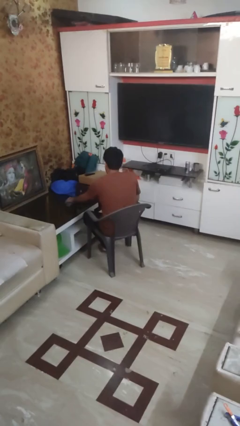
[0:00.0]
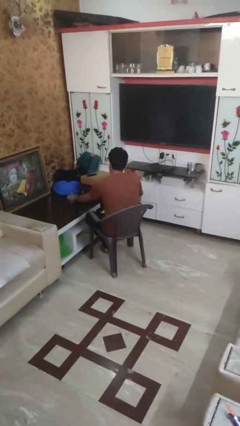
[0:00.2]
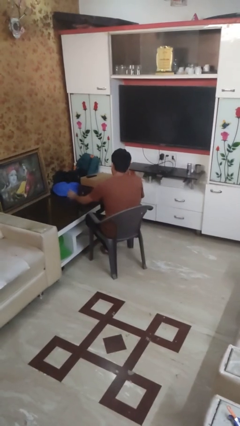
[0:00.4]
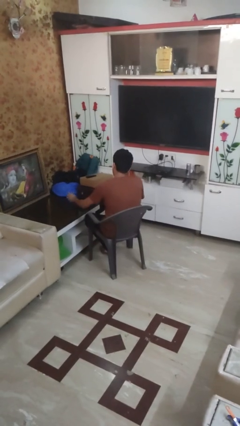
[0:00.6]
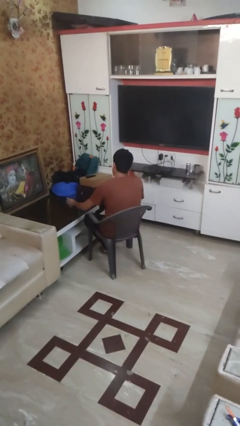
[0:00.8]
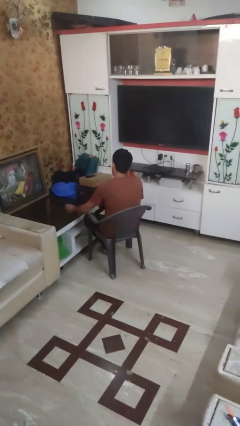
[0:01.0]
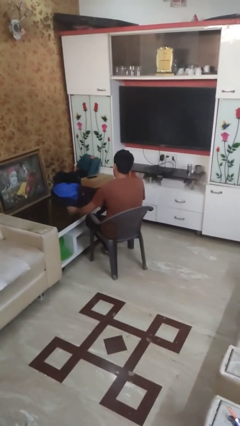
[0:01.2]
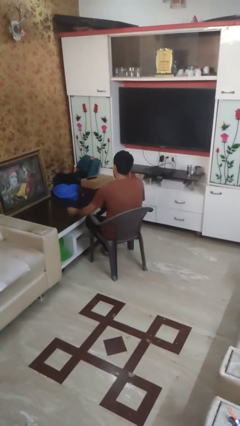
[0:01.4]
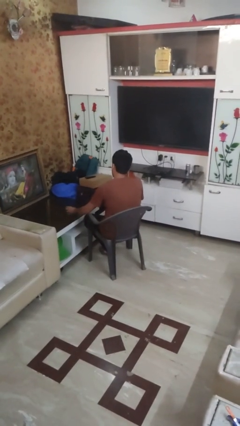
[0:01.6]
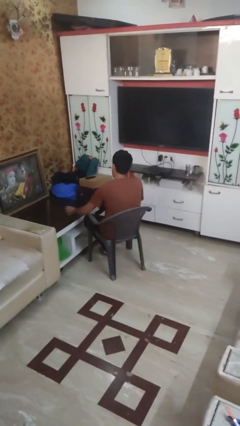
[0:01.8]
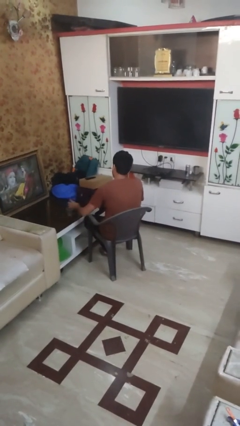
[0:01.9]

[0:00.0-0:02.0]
person sets upright glass

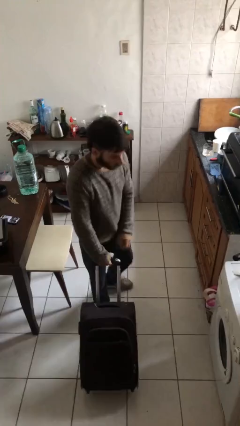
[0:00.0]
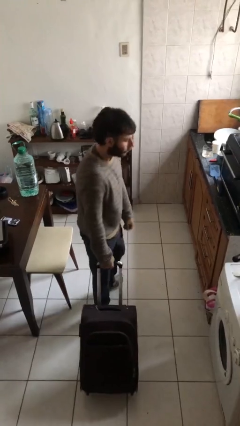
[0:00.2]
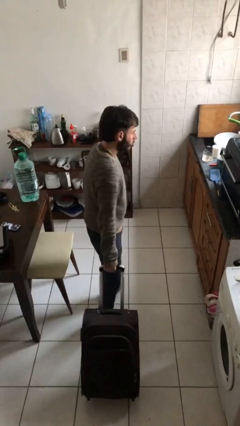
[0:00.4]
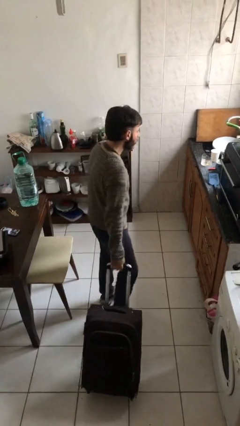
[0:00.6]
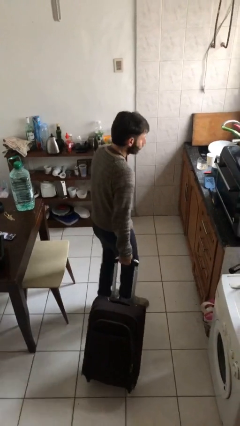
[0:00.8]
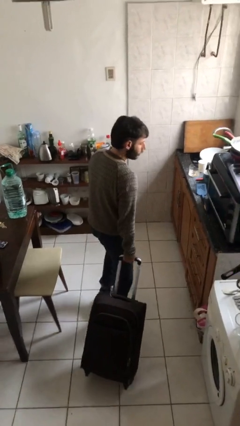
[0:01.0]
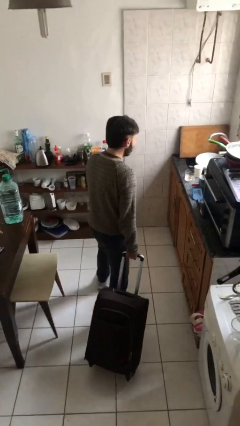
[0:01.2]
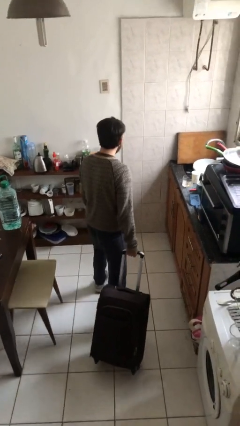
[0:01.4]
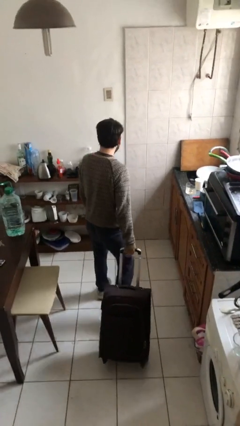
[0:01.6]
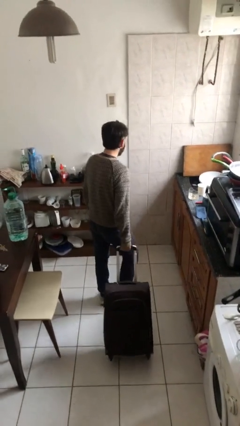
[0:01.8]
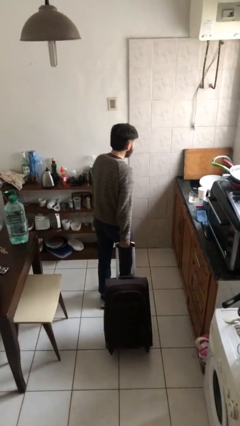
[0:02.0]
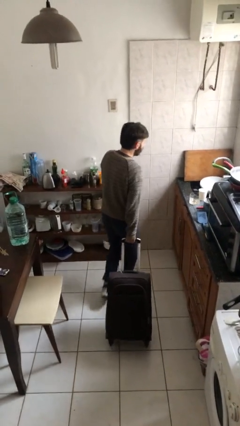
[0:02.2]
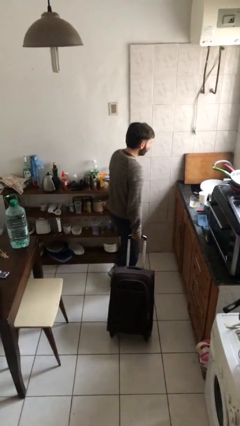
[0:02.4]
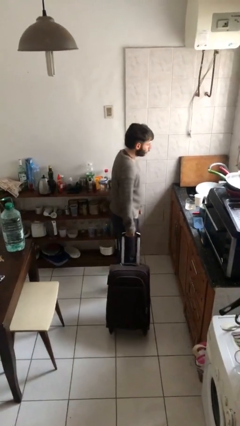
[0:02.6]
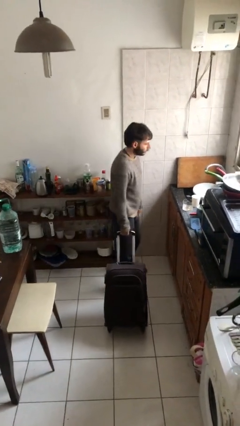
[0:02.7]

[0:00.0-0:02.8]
person pulls wheeled cart

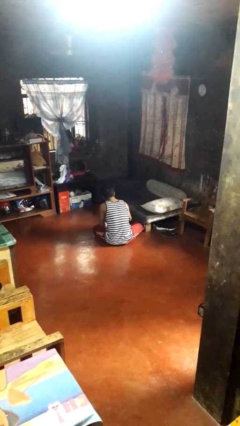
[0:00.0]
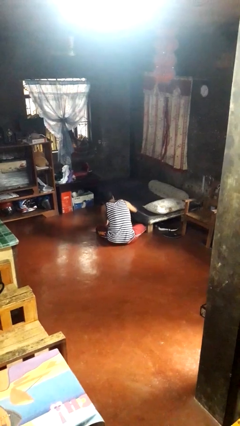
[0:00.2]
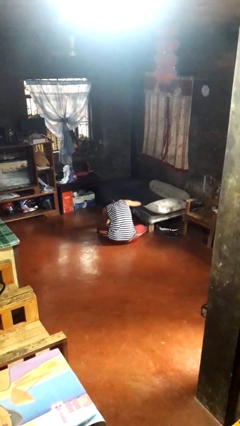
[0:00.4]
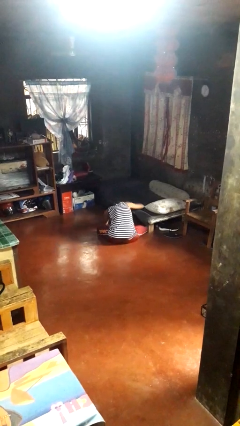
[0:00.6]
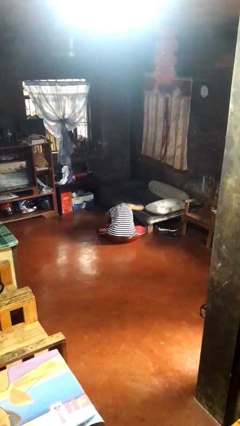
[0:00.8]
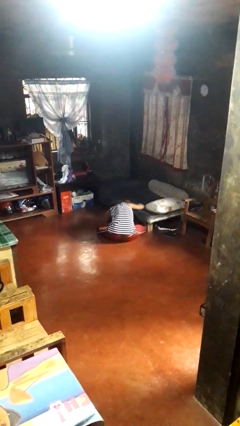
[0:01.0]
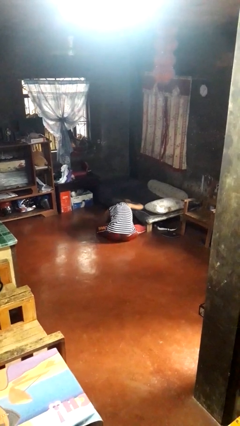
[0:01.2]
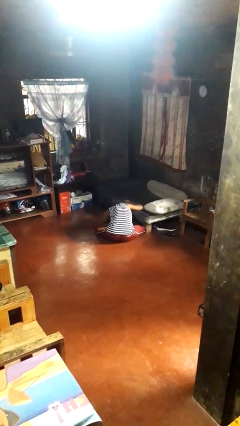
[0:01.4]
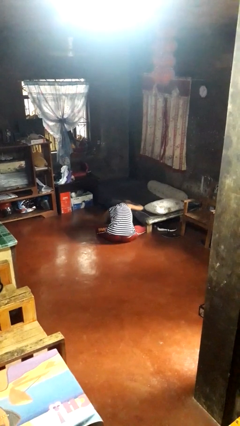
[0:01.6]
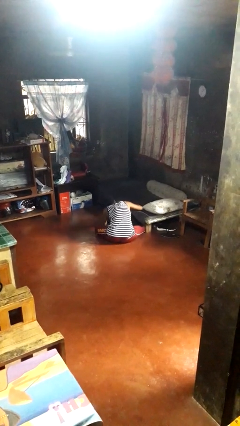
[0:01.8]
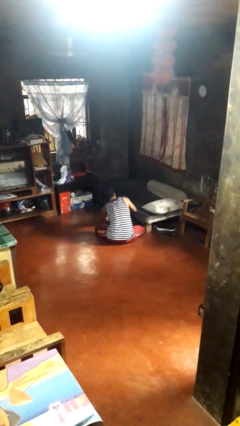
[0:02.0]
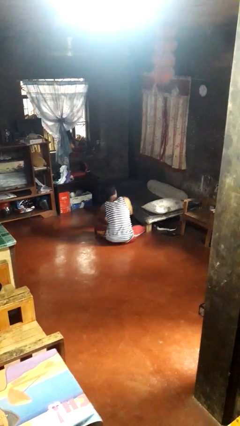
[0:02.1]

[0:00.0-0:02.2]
person searches under bed

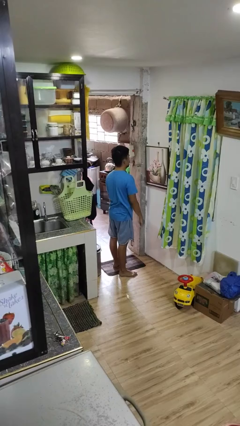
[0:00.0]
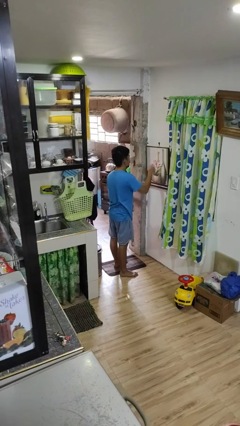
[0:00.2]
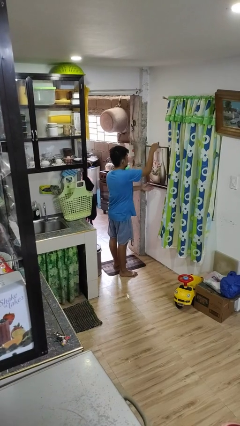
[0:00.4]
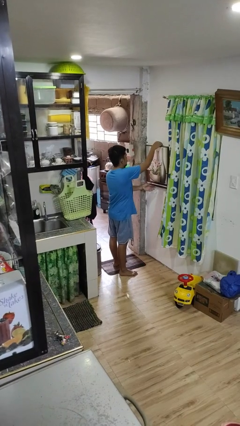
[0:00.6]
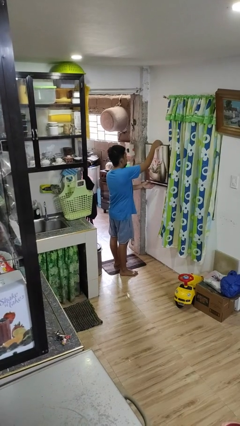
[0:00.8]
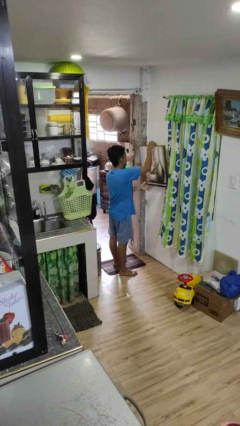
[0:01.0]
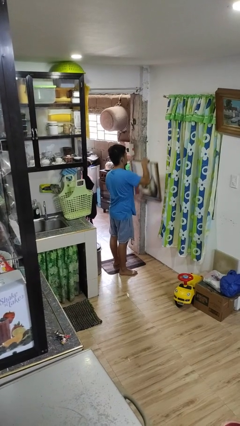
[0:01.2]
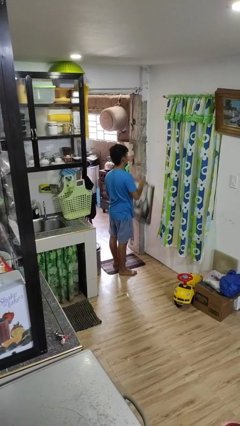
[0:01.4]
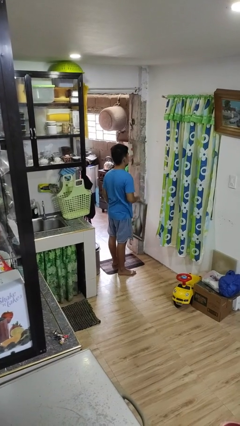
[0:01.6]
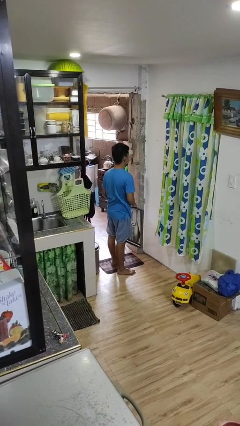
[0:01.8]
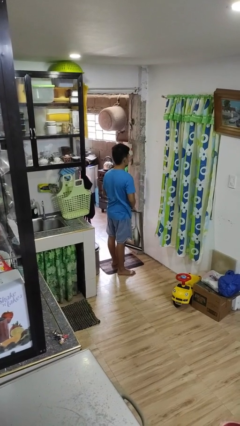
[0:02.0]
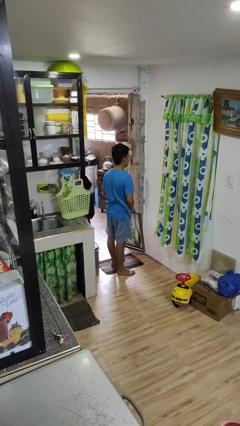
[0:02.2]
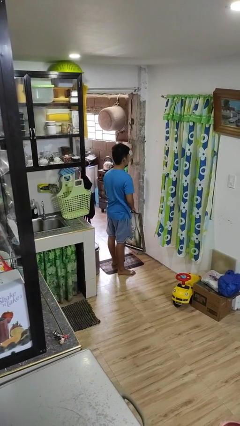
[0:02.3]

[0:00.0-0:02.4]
person takes down picture frame

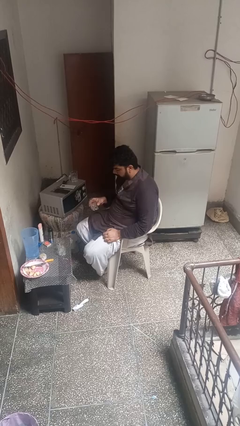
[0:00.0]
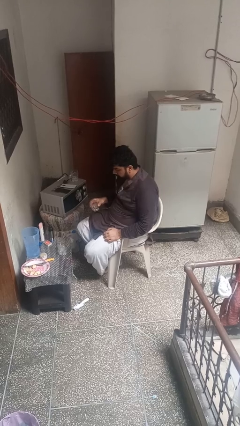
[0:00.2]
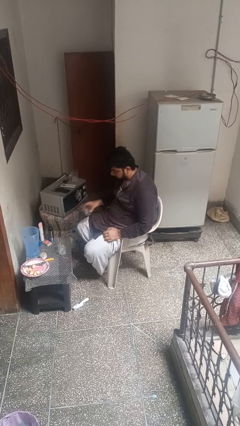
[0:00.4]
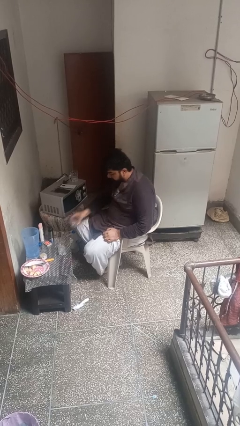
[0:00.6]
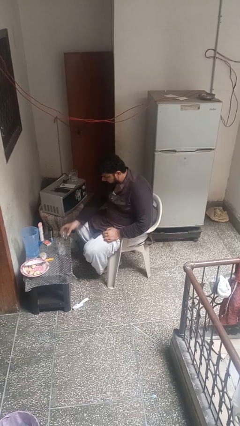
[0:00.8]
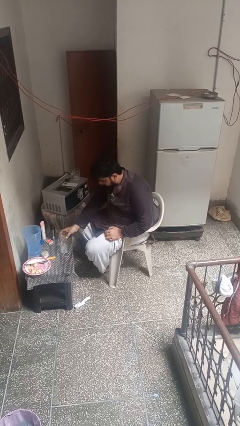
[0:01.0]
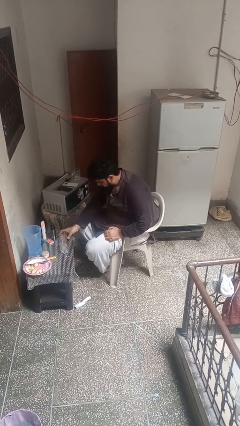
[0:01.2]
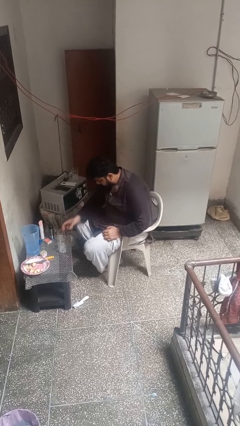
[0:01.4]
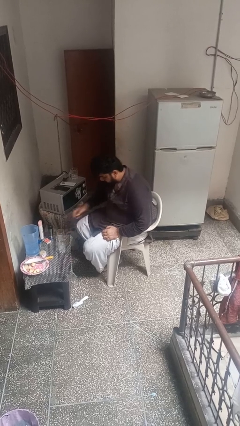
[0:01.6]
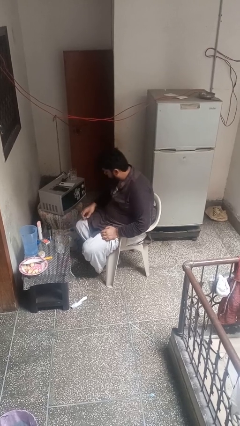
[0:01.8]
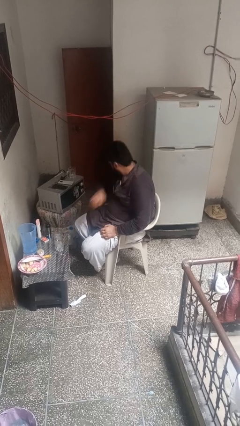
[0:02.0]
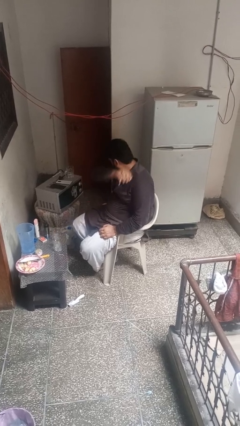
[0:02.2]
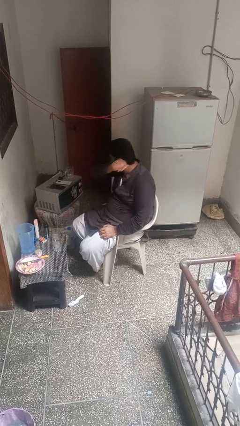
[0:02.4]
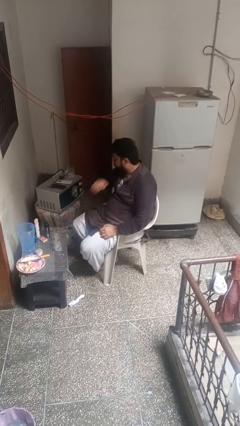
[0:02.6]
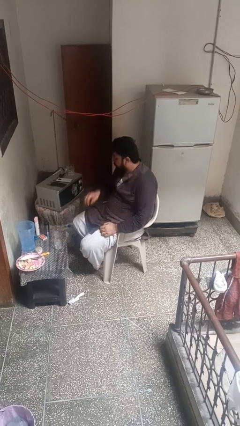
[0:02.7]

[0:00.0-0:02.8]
person puts down object on table

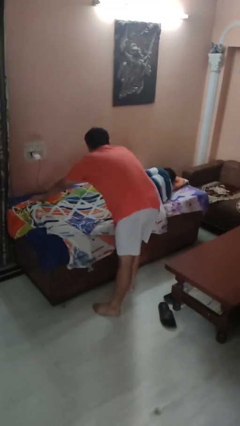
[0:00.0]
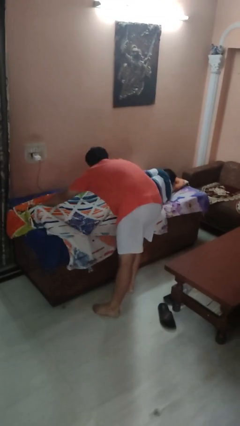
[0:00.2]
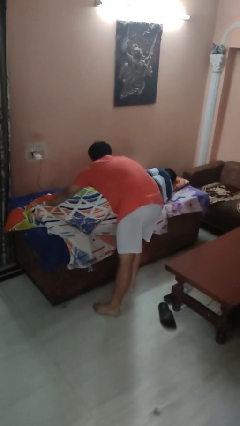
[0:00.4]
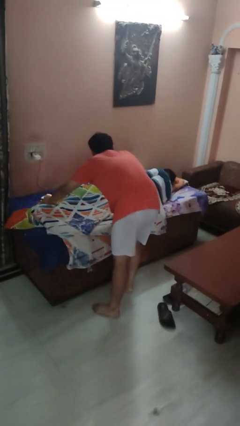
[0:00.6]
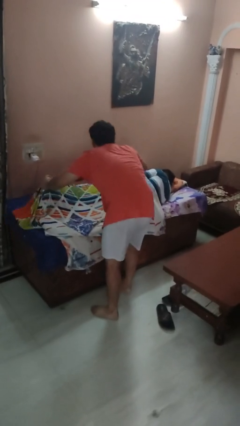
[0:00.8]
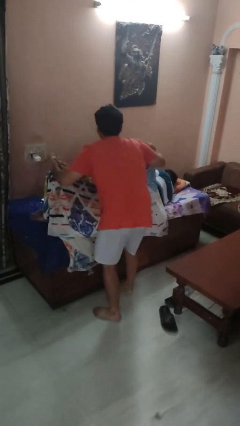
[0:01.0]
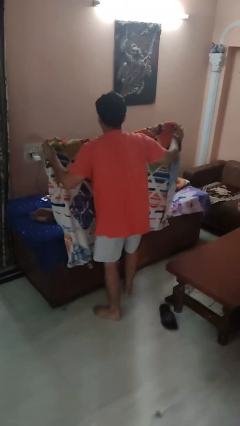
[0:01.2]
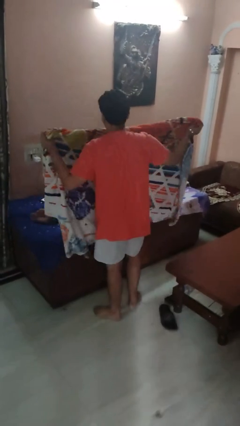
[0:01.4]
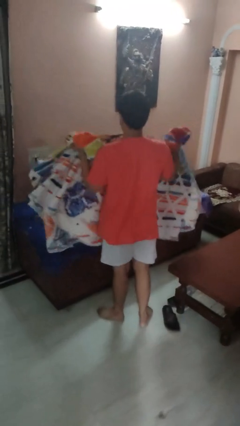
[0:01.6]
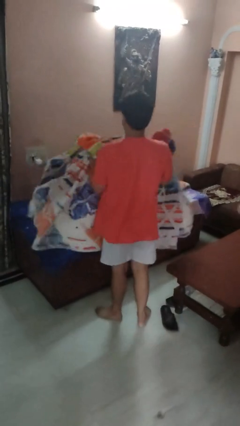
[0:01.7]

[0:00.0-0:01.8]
person uncovers friend with blanket

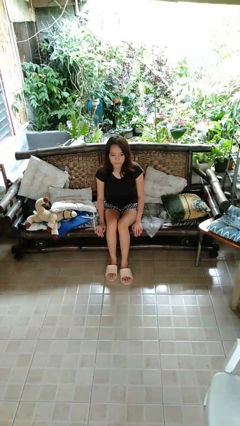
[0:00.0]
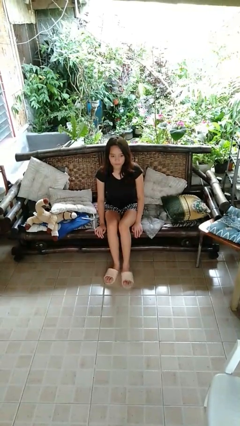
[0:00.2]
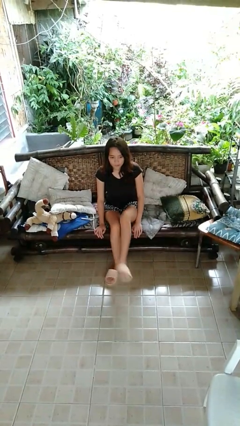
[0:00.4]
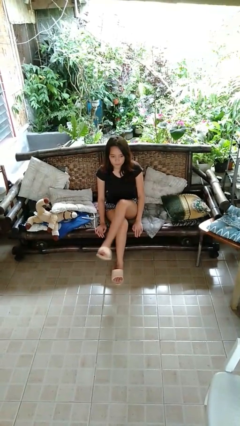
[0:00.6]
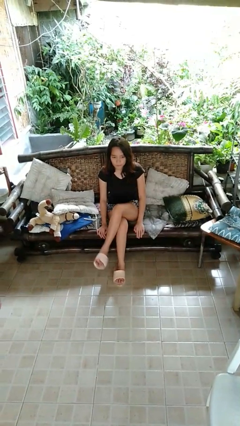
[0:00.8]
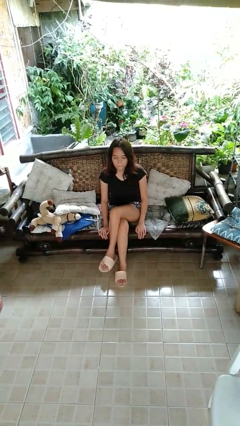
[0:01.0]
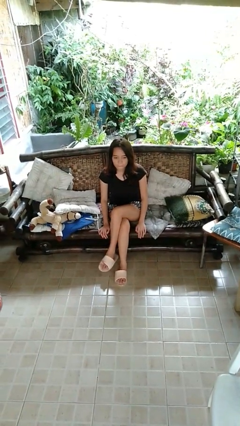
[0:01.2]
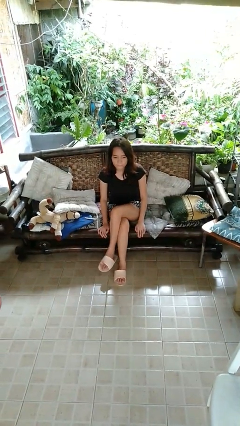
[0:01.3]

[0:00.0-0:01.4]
person crosses legs

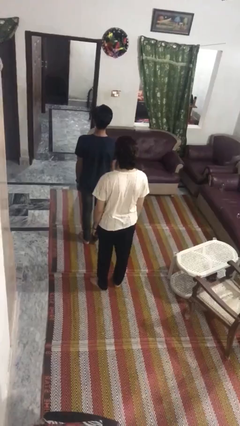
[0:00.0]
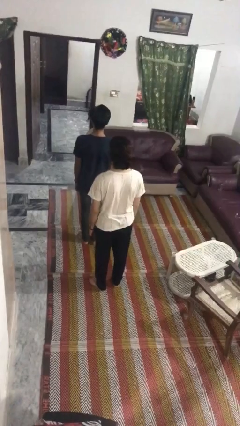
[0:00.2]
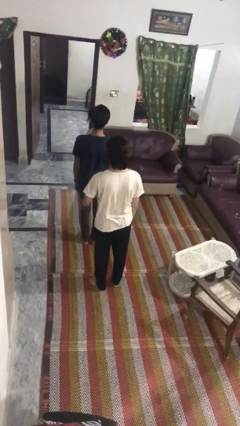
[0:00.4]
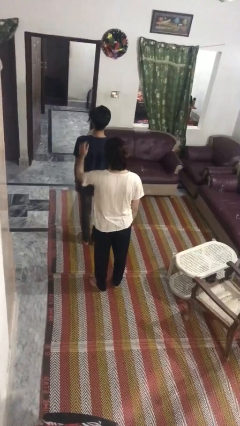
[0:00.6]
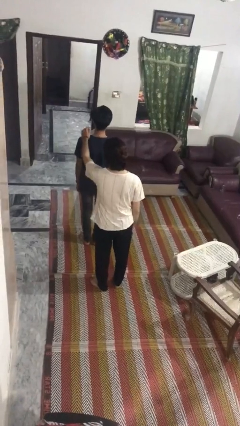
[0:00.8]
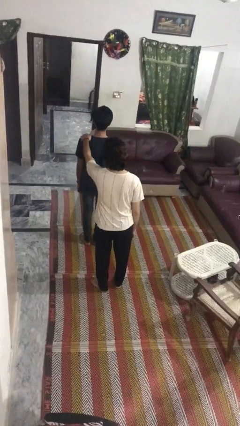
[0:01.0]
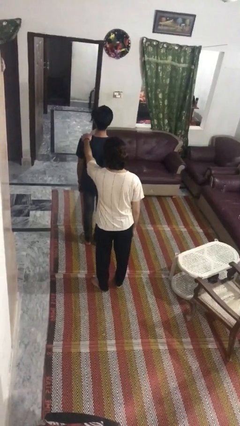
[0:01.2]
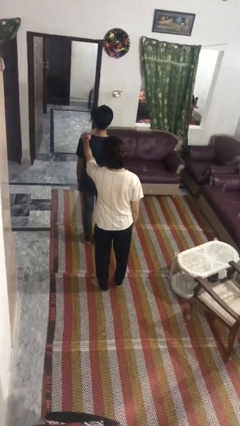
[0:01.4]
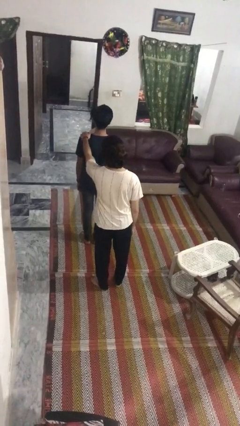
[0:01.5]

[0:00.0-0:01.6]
person grabs person by shoulder
